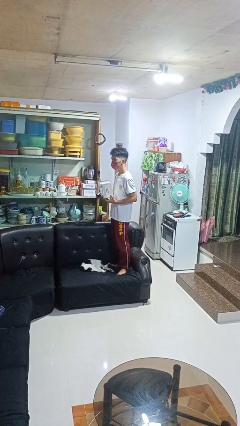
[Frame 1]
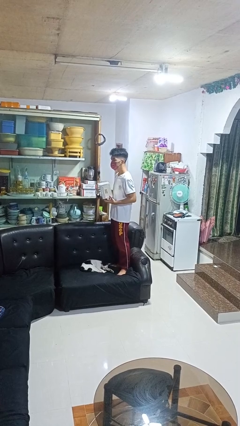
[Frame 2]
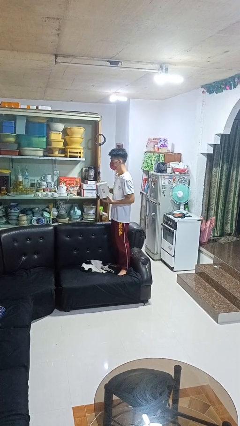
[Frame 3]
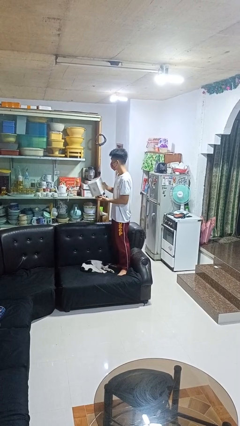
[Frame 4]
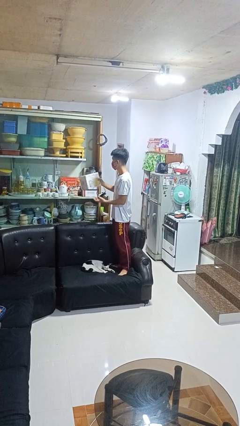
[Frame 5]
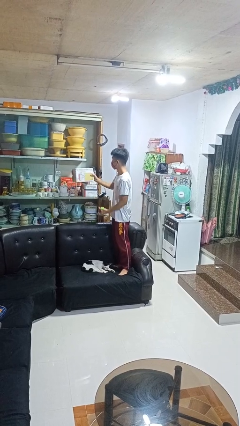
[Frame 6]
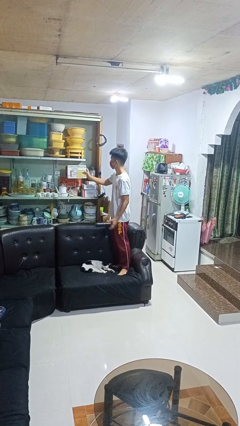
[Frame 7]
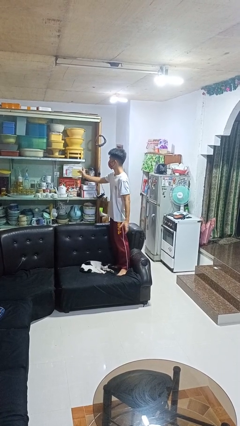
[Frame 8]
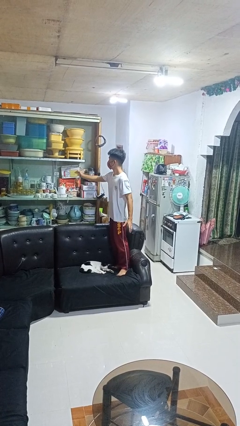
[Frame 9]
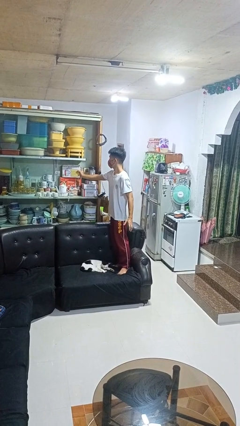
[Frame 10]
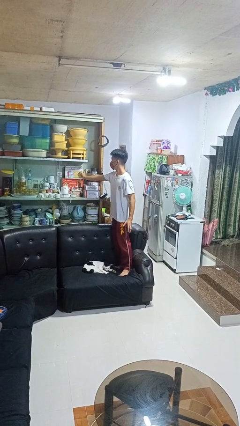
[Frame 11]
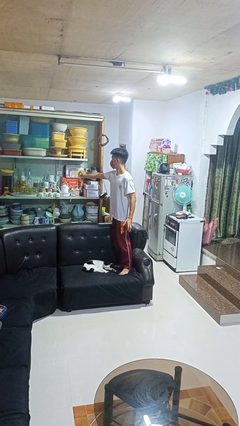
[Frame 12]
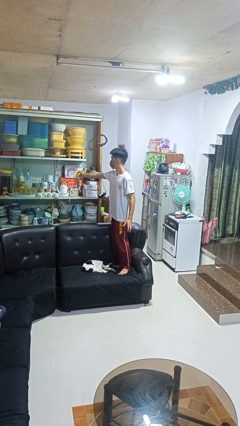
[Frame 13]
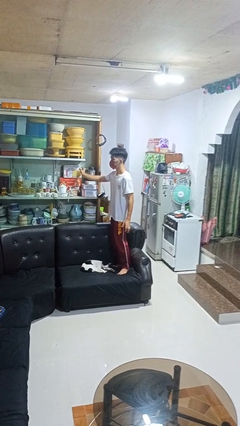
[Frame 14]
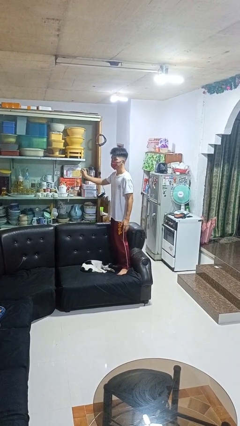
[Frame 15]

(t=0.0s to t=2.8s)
person puts down object into cabinet

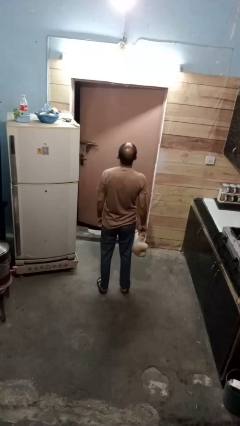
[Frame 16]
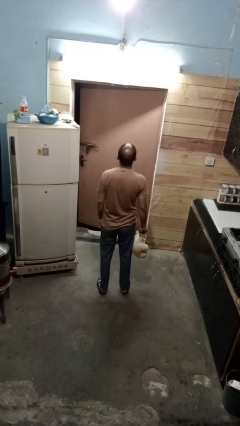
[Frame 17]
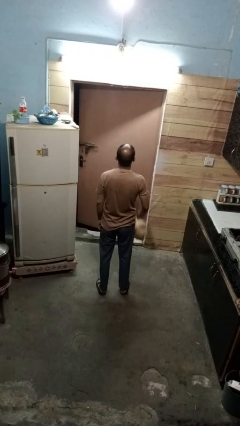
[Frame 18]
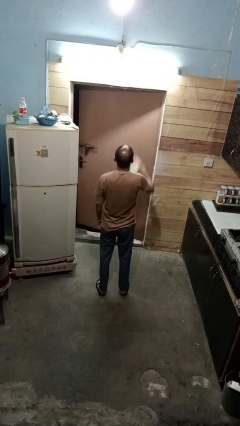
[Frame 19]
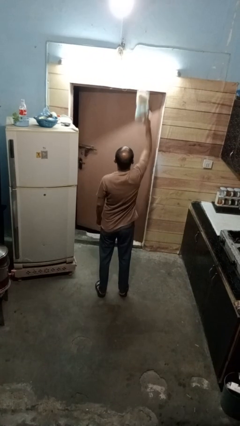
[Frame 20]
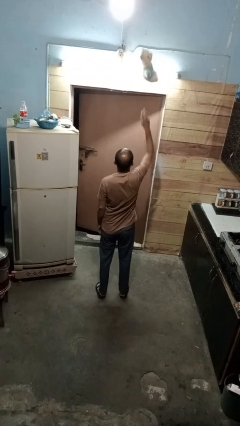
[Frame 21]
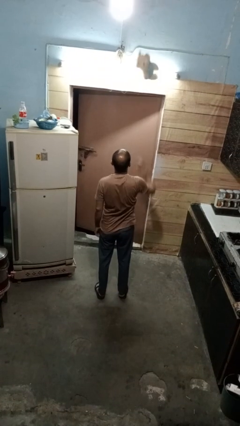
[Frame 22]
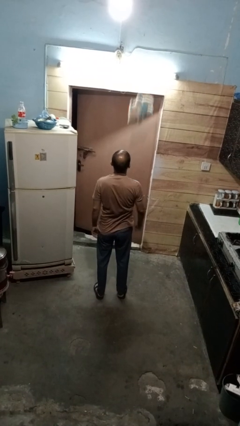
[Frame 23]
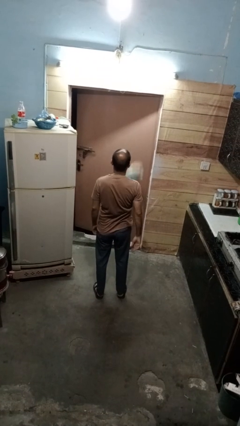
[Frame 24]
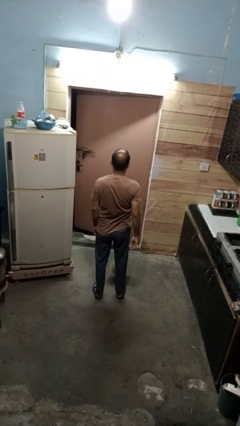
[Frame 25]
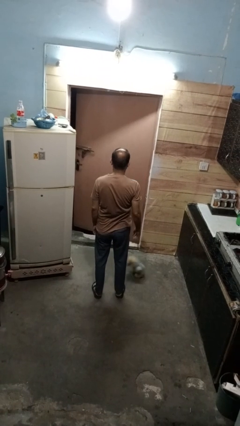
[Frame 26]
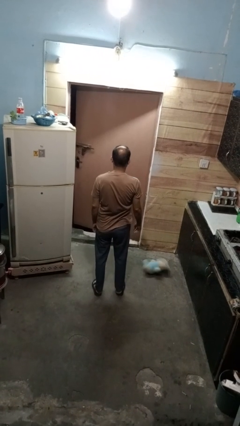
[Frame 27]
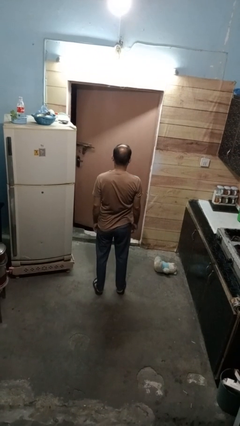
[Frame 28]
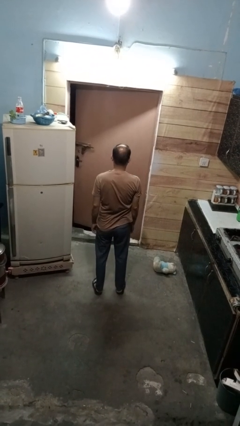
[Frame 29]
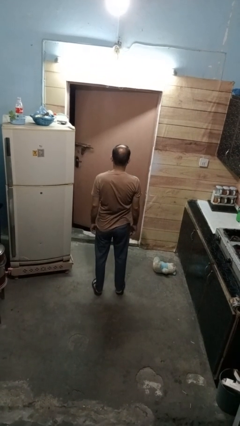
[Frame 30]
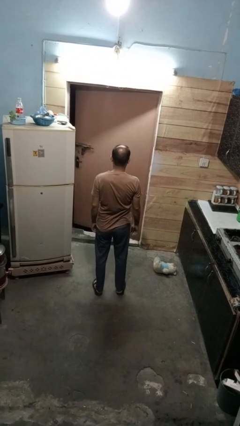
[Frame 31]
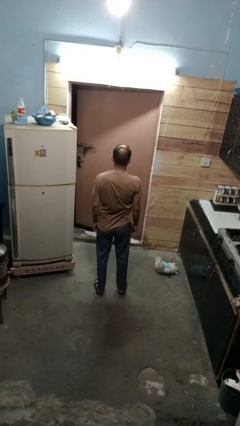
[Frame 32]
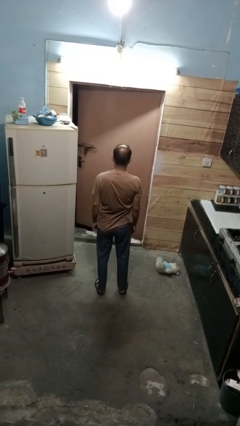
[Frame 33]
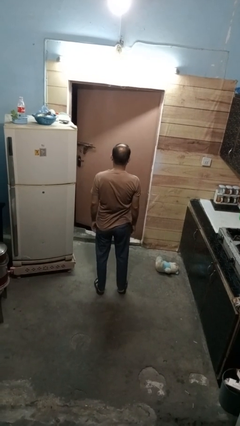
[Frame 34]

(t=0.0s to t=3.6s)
person throws object into air

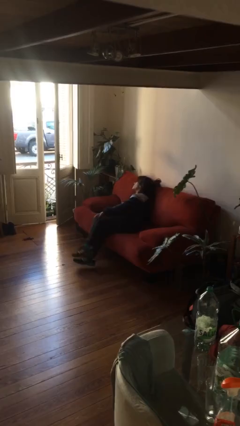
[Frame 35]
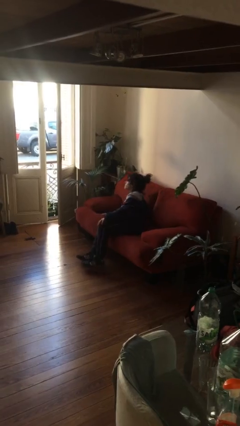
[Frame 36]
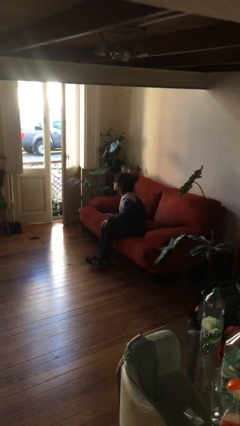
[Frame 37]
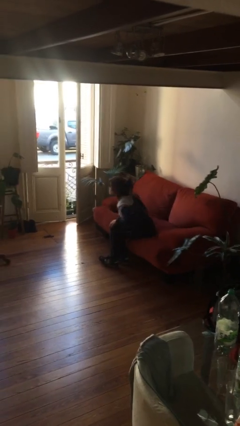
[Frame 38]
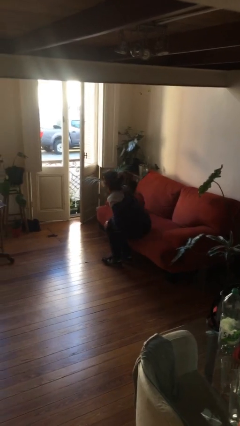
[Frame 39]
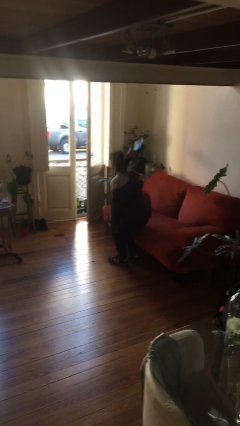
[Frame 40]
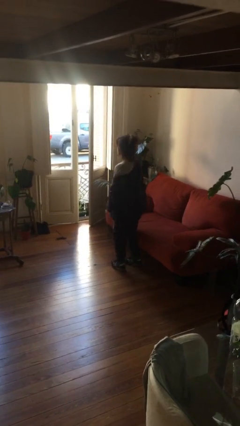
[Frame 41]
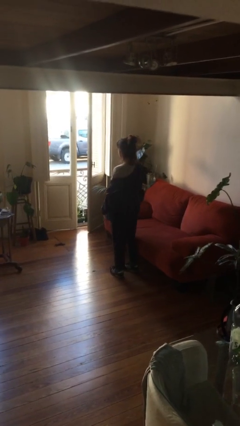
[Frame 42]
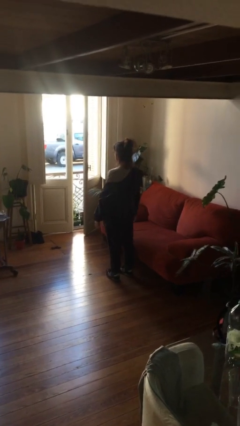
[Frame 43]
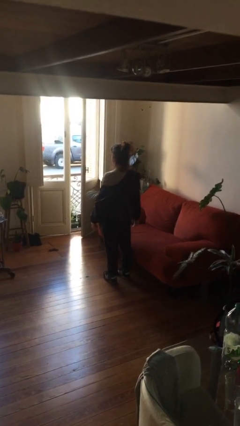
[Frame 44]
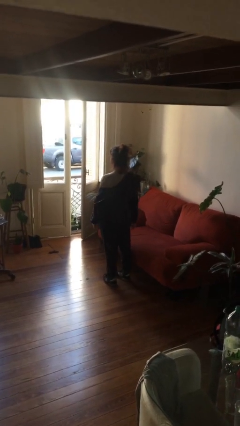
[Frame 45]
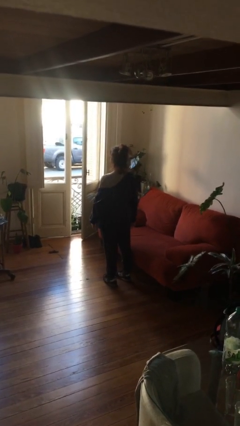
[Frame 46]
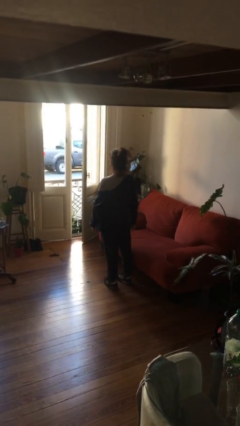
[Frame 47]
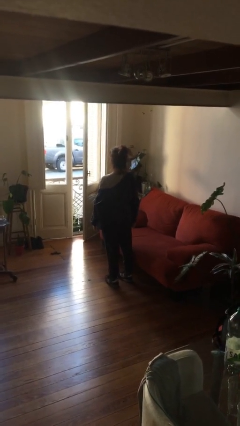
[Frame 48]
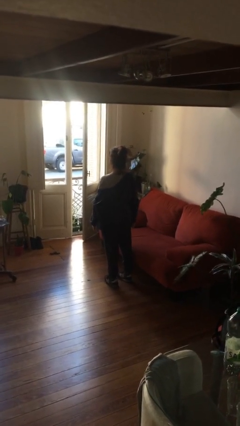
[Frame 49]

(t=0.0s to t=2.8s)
person stands up

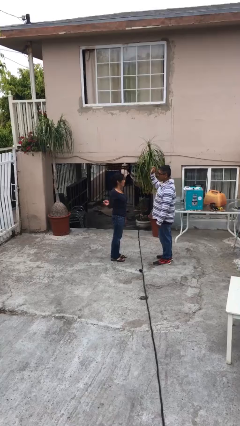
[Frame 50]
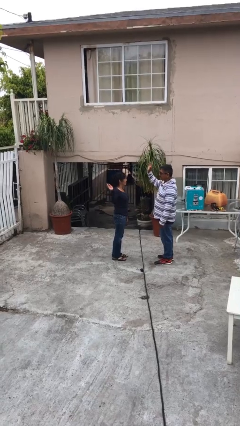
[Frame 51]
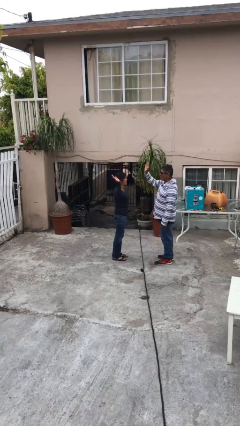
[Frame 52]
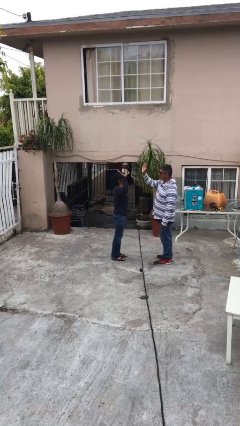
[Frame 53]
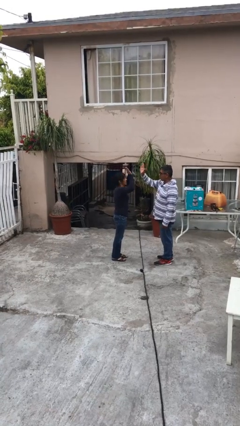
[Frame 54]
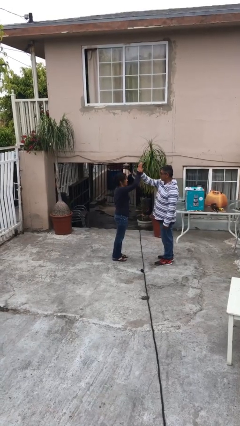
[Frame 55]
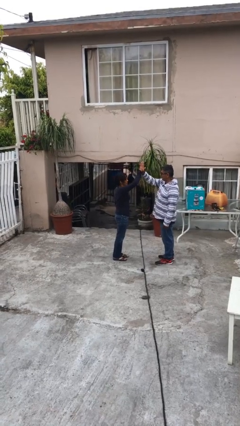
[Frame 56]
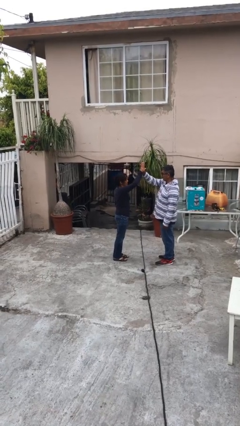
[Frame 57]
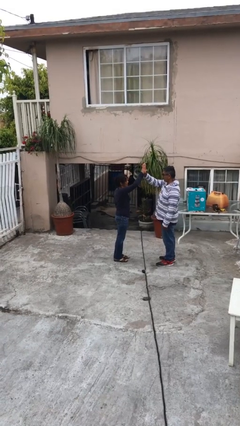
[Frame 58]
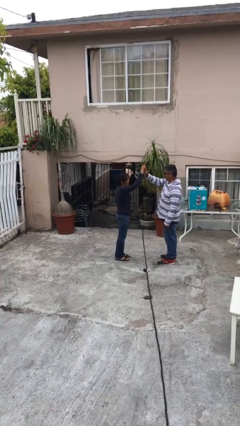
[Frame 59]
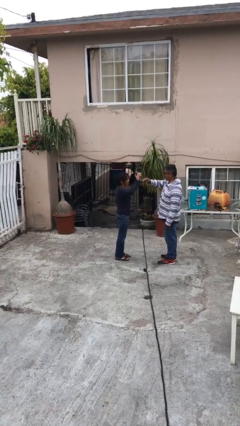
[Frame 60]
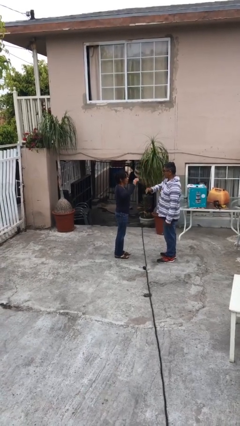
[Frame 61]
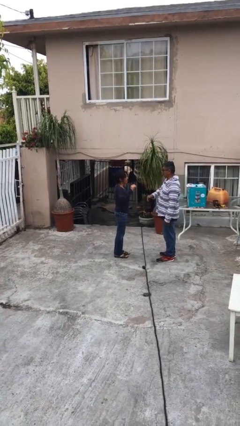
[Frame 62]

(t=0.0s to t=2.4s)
person highfives hand

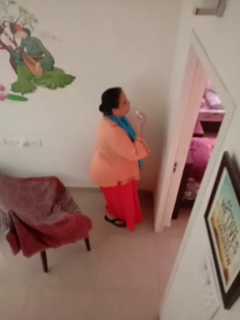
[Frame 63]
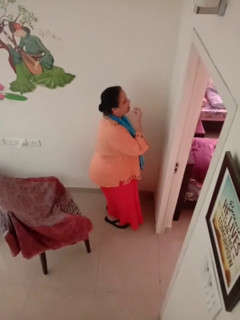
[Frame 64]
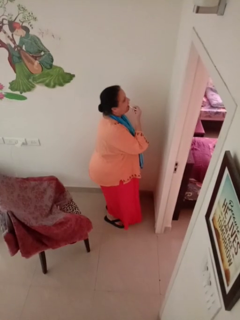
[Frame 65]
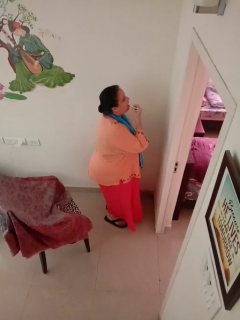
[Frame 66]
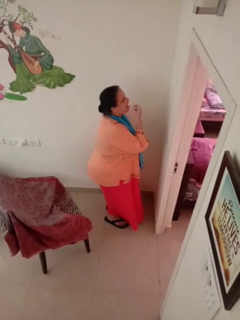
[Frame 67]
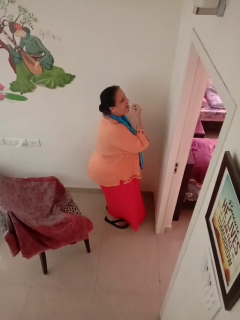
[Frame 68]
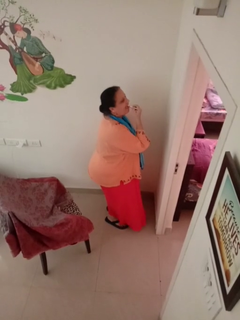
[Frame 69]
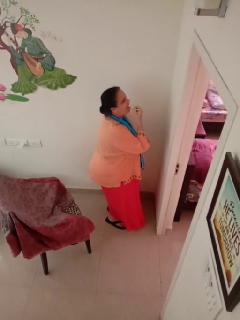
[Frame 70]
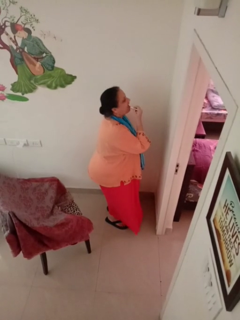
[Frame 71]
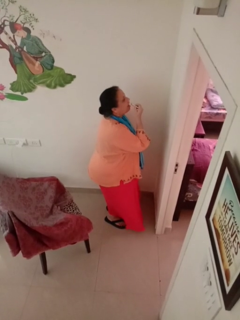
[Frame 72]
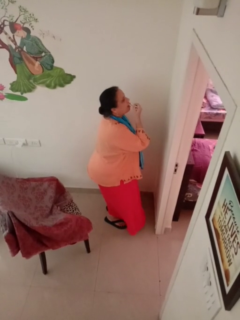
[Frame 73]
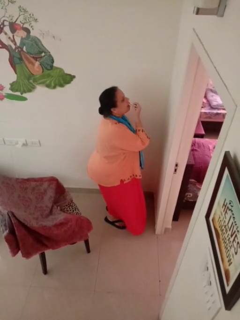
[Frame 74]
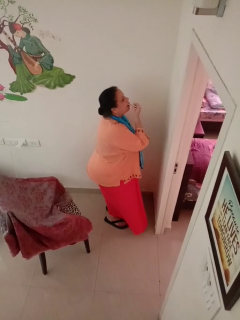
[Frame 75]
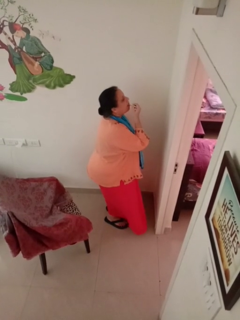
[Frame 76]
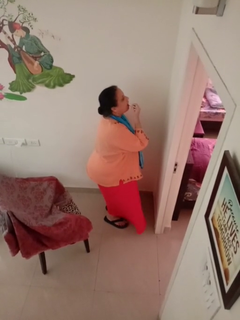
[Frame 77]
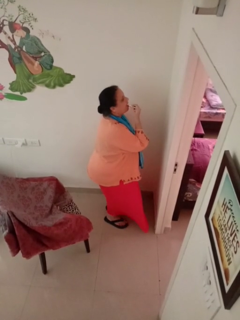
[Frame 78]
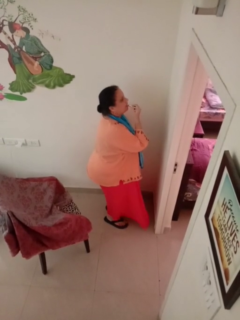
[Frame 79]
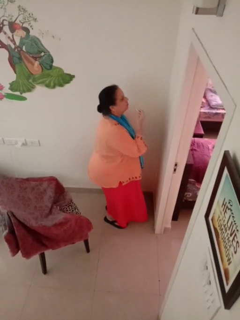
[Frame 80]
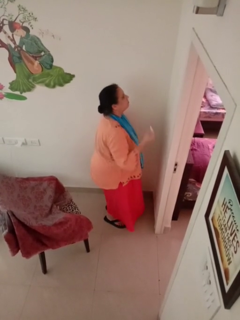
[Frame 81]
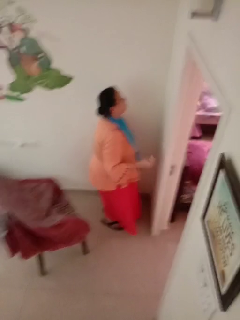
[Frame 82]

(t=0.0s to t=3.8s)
person applies lip makeup

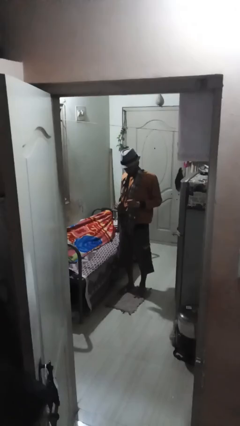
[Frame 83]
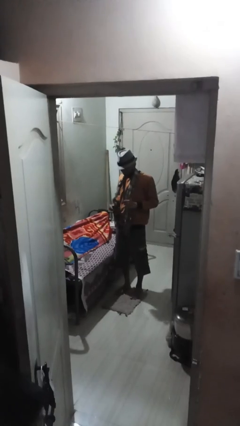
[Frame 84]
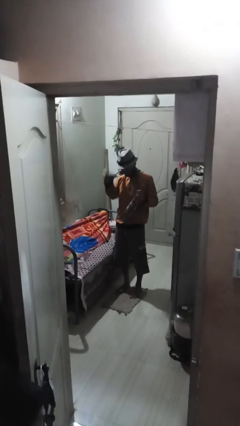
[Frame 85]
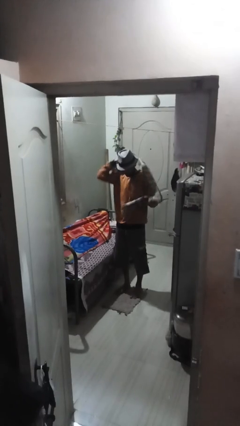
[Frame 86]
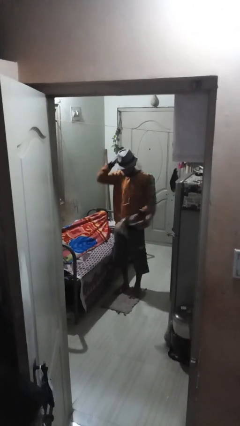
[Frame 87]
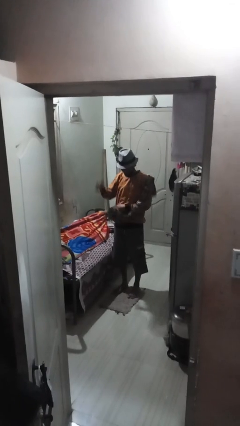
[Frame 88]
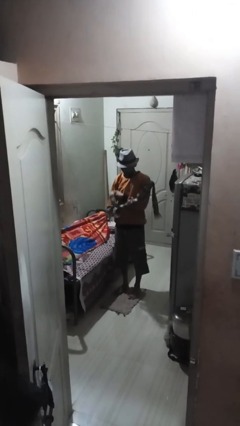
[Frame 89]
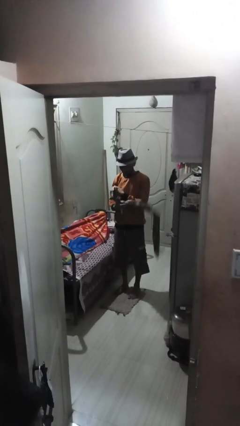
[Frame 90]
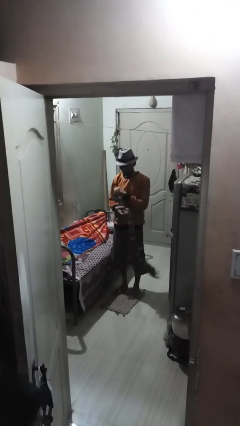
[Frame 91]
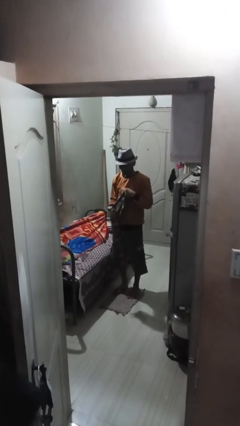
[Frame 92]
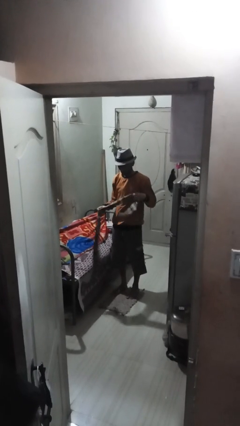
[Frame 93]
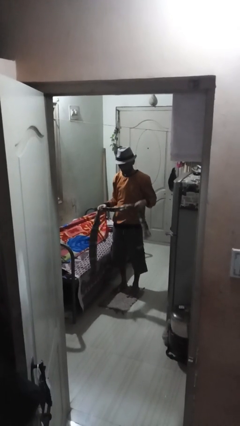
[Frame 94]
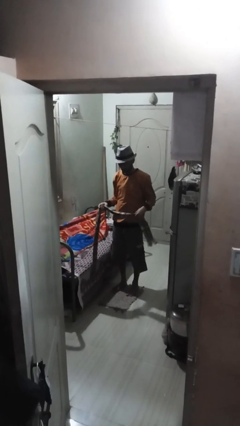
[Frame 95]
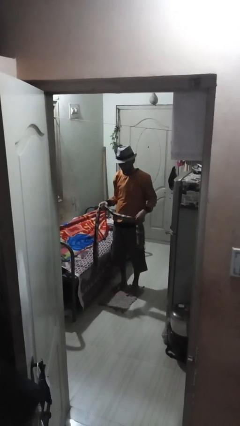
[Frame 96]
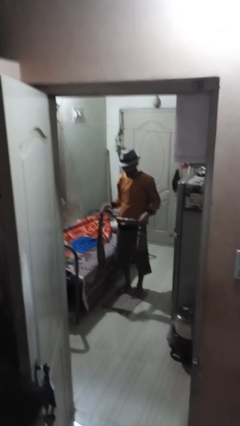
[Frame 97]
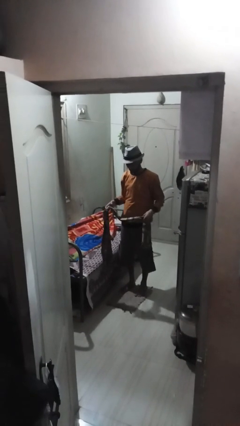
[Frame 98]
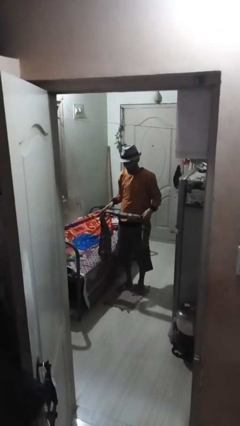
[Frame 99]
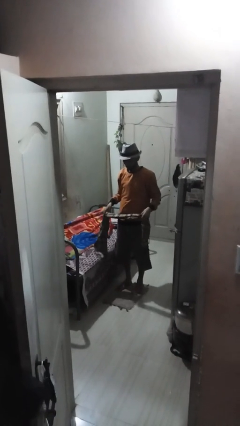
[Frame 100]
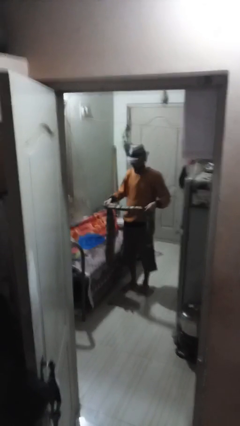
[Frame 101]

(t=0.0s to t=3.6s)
person takes off scarf
